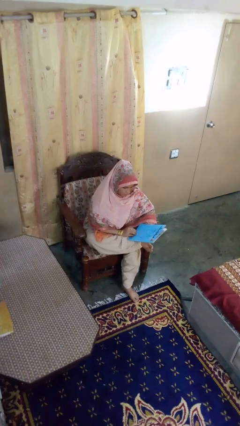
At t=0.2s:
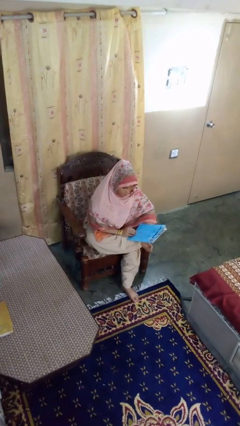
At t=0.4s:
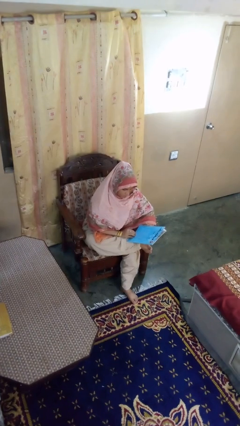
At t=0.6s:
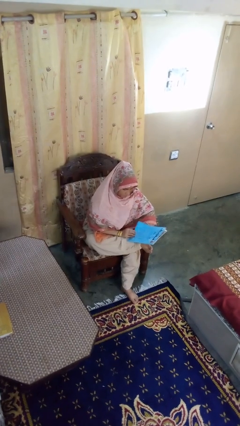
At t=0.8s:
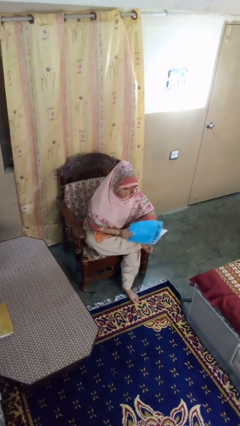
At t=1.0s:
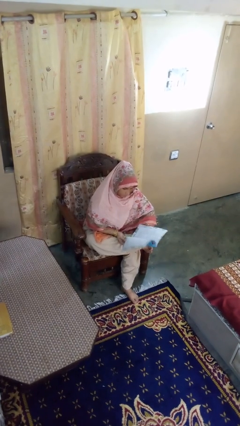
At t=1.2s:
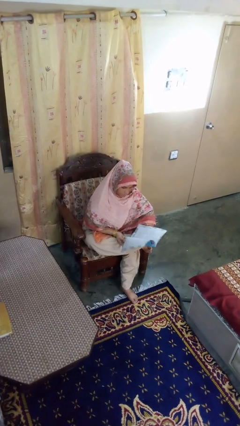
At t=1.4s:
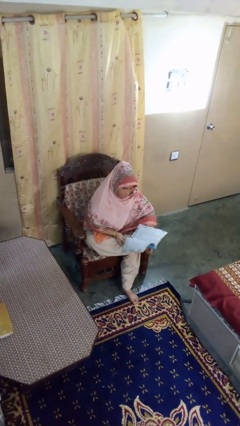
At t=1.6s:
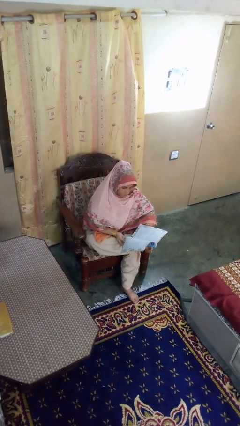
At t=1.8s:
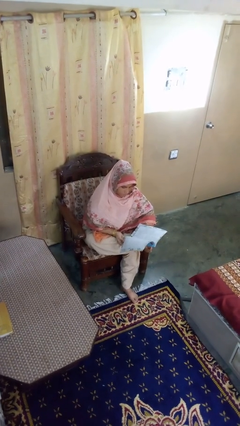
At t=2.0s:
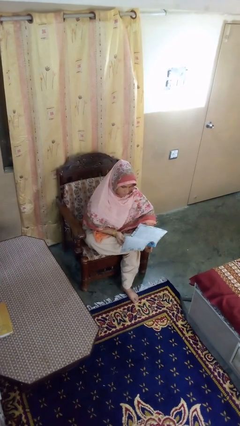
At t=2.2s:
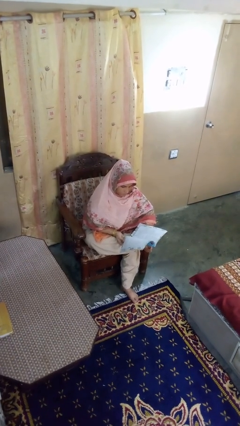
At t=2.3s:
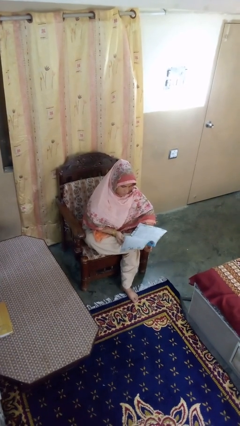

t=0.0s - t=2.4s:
person reads magazine

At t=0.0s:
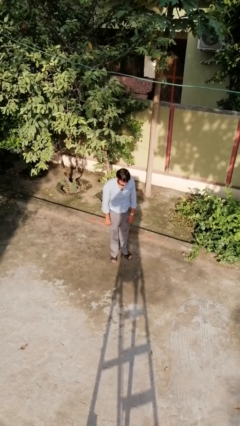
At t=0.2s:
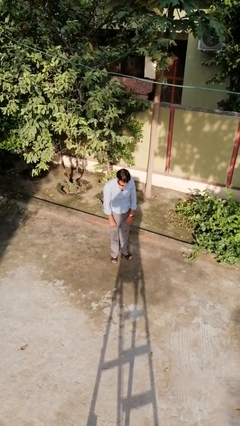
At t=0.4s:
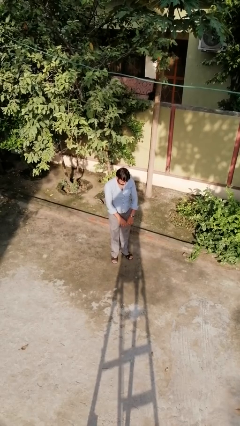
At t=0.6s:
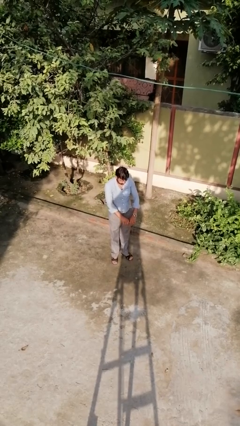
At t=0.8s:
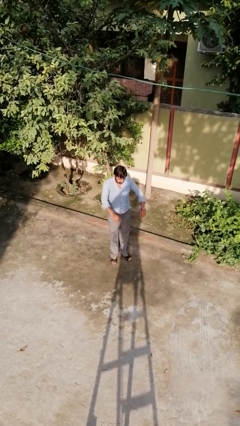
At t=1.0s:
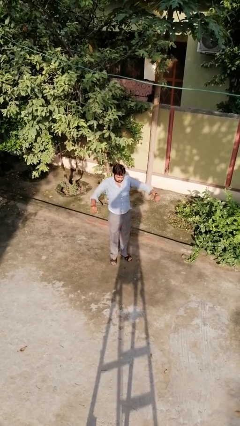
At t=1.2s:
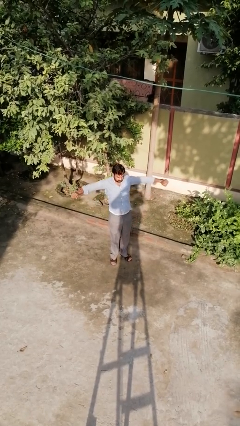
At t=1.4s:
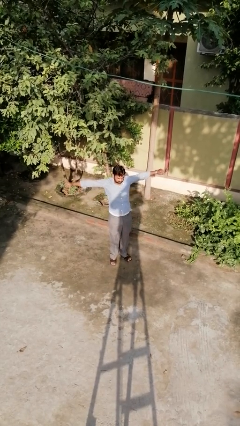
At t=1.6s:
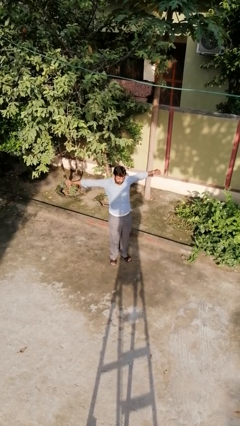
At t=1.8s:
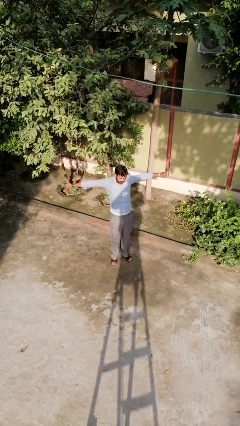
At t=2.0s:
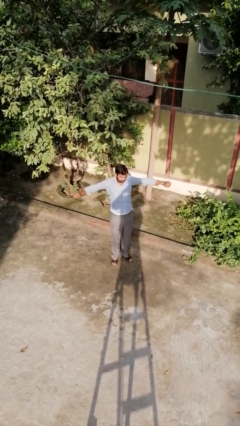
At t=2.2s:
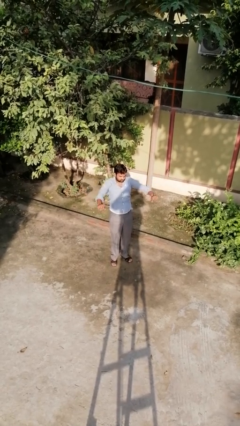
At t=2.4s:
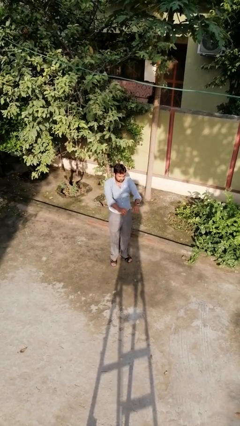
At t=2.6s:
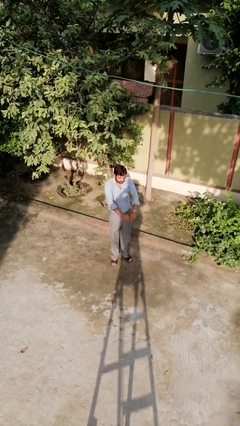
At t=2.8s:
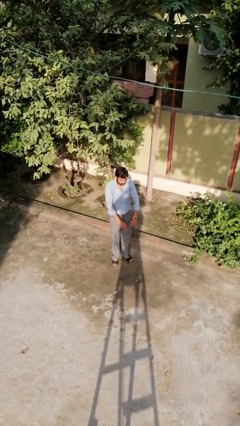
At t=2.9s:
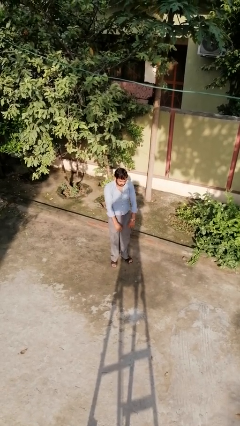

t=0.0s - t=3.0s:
person stretches arms to side

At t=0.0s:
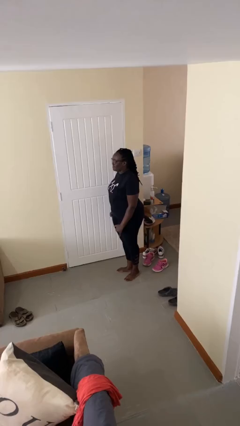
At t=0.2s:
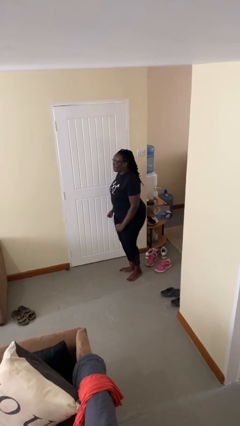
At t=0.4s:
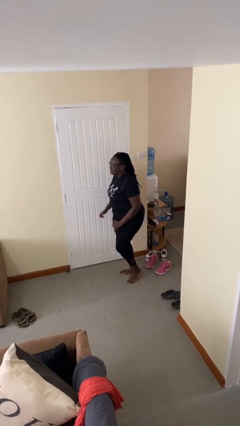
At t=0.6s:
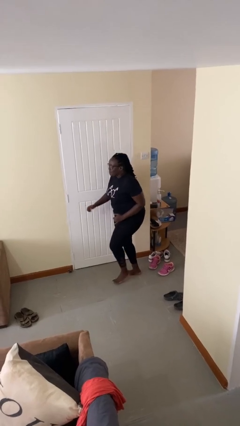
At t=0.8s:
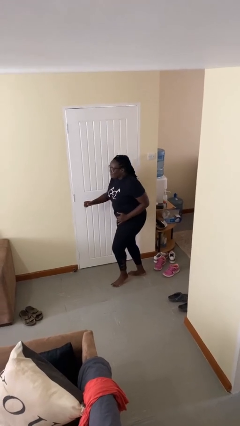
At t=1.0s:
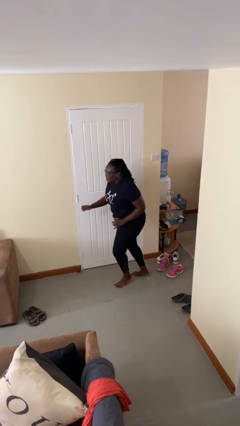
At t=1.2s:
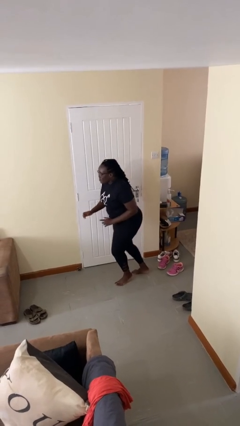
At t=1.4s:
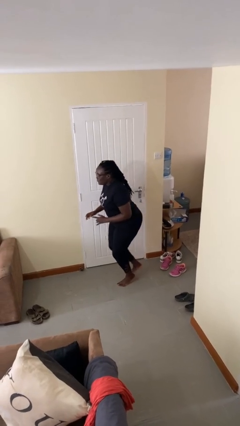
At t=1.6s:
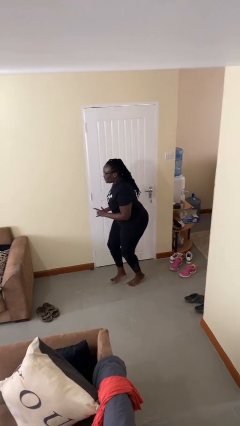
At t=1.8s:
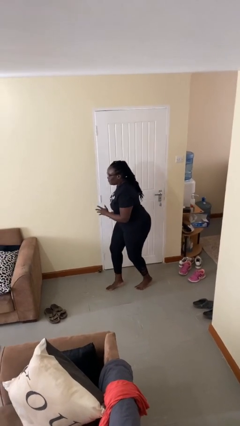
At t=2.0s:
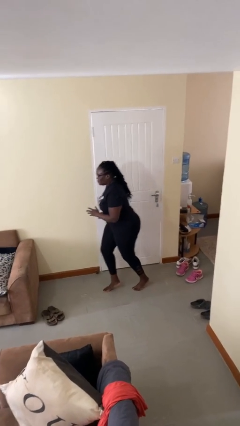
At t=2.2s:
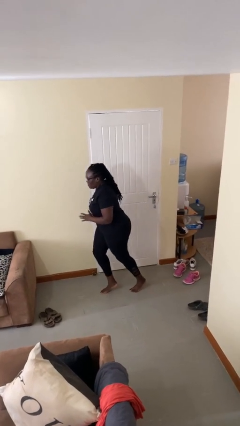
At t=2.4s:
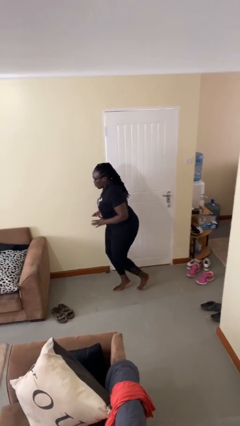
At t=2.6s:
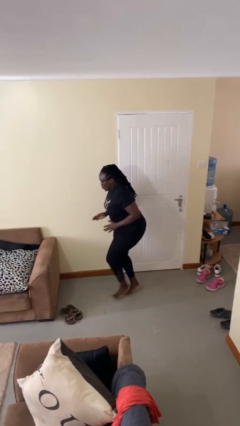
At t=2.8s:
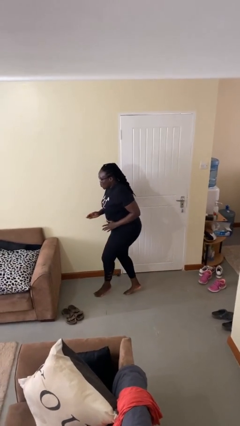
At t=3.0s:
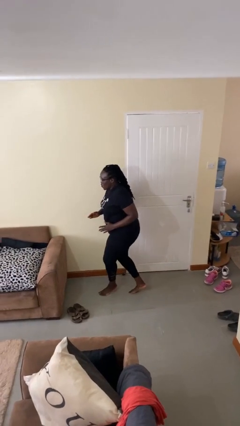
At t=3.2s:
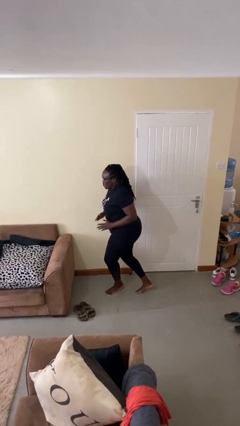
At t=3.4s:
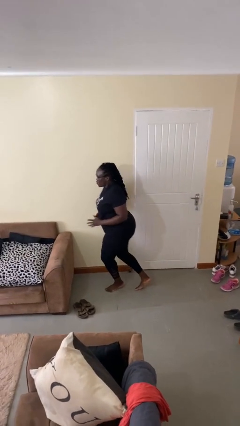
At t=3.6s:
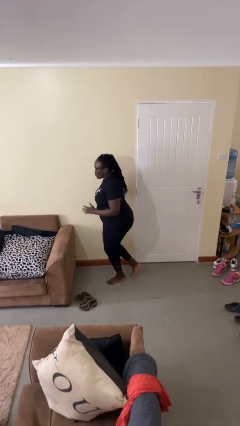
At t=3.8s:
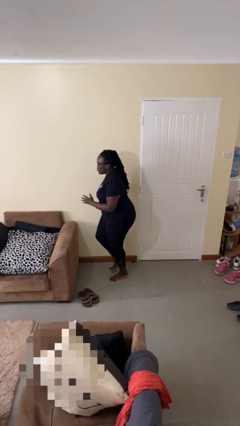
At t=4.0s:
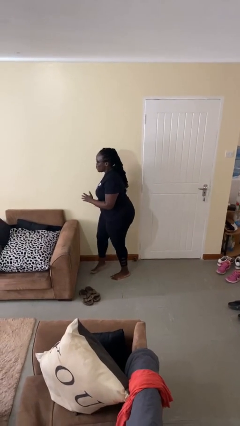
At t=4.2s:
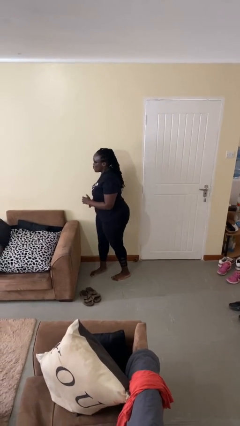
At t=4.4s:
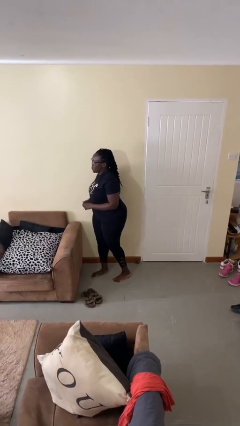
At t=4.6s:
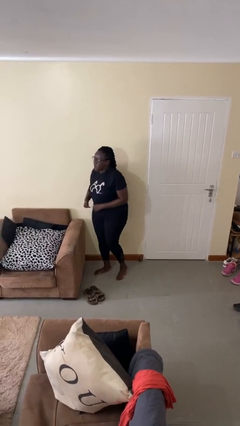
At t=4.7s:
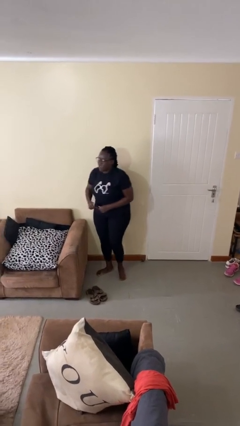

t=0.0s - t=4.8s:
person walks tiptoe

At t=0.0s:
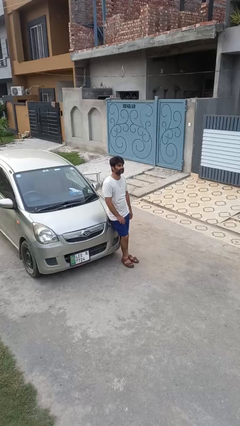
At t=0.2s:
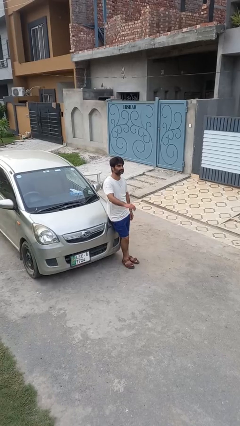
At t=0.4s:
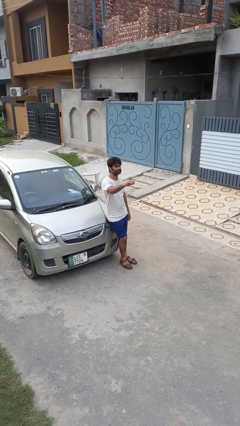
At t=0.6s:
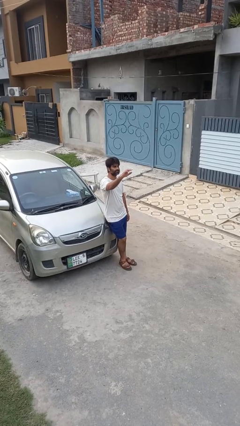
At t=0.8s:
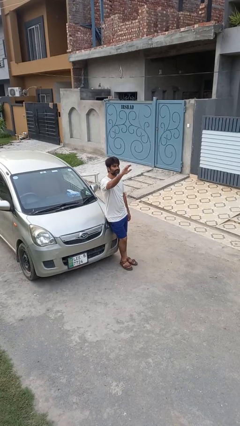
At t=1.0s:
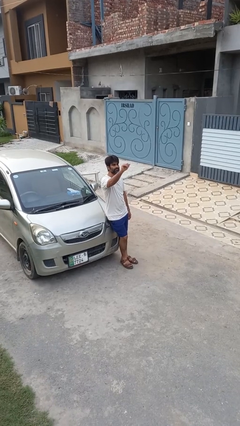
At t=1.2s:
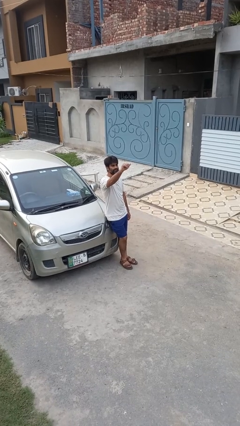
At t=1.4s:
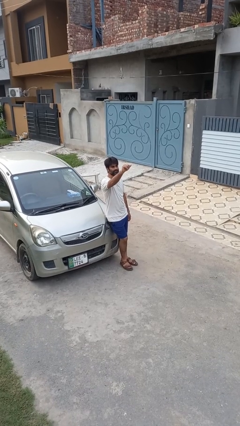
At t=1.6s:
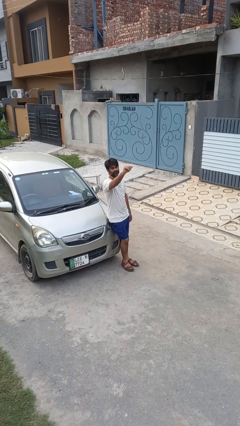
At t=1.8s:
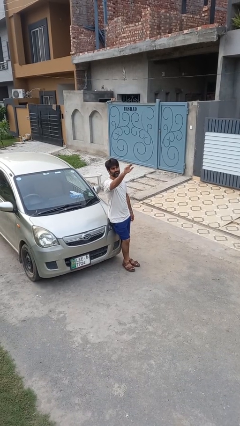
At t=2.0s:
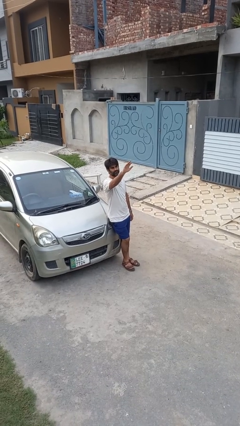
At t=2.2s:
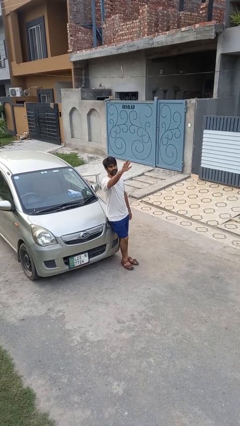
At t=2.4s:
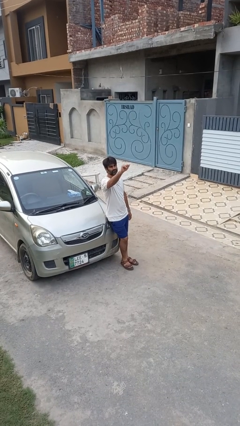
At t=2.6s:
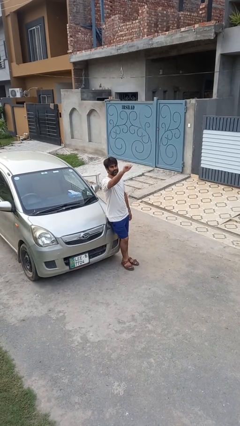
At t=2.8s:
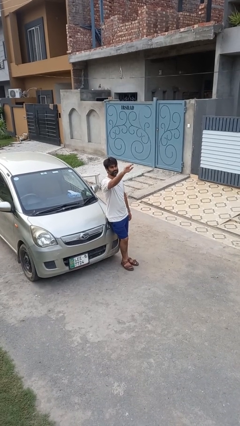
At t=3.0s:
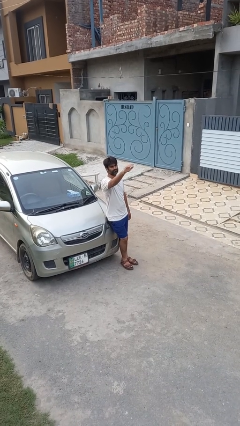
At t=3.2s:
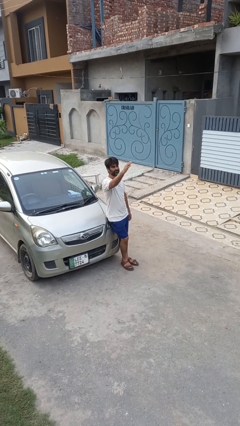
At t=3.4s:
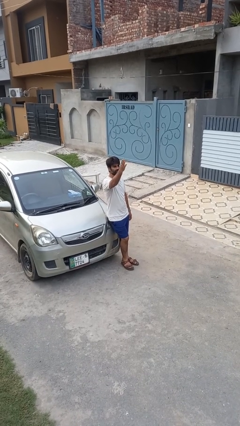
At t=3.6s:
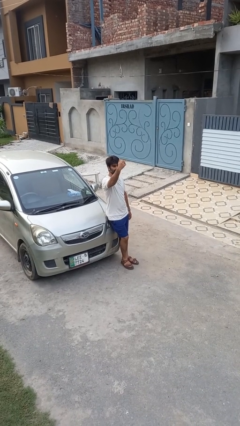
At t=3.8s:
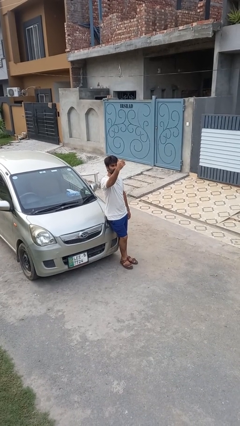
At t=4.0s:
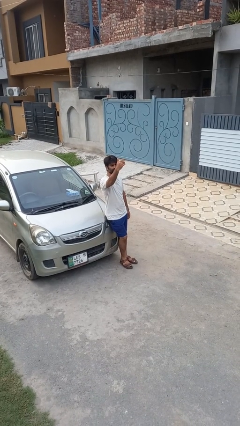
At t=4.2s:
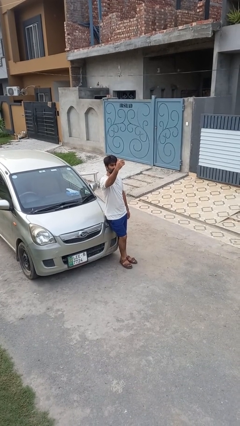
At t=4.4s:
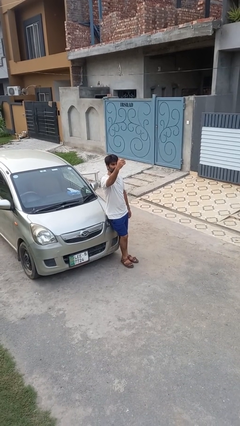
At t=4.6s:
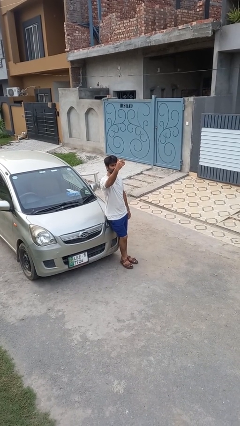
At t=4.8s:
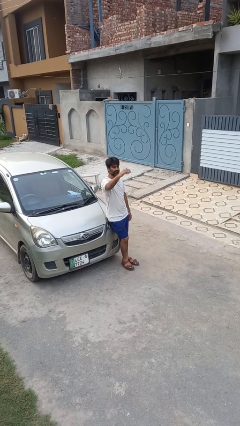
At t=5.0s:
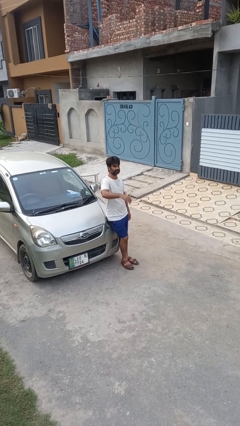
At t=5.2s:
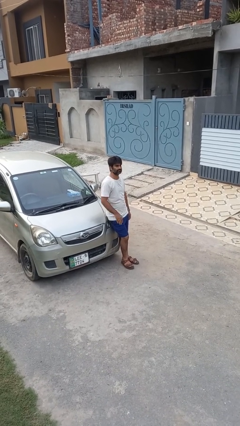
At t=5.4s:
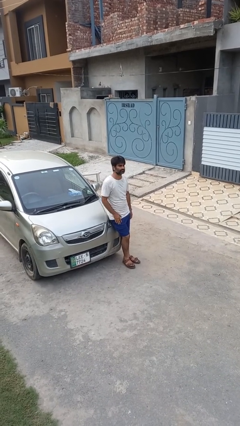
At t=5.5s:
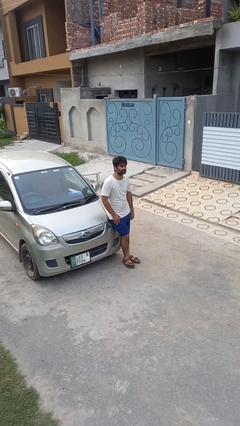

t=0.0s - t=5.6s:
person gestures come here

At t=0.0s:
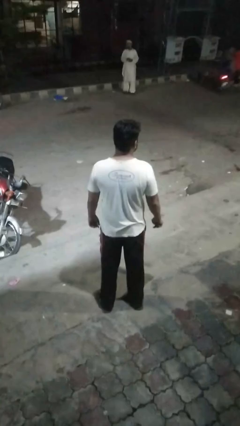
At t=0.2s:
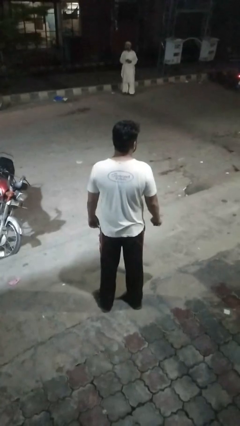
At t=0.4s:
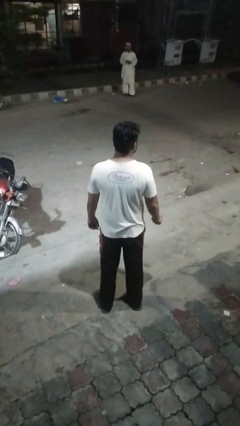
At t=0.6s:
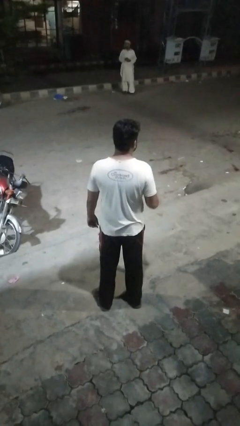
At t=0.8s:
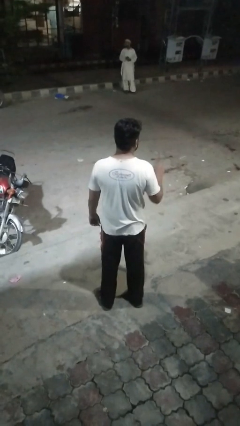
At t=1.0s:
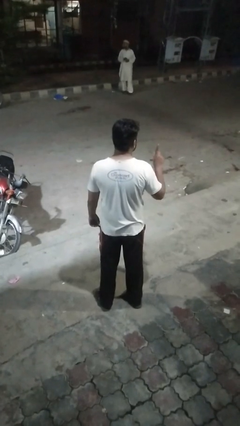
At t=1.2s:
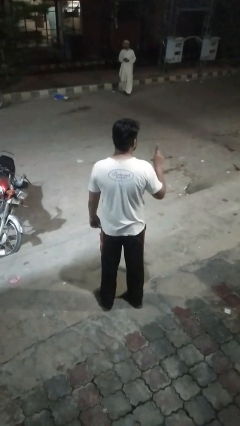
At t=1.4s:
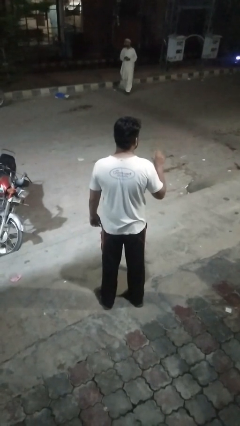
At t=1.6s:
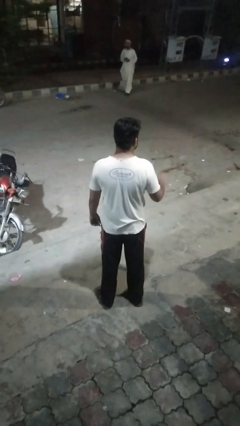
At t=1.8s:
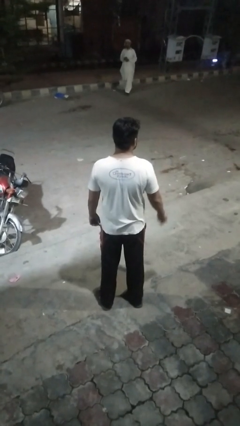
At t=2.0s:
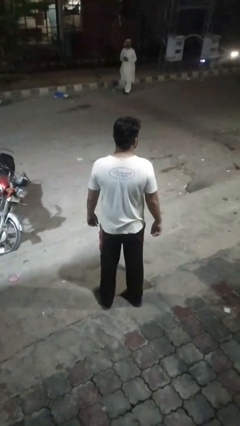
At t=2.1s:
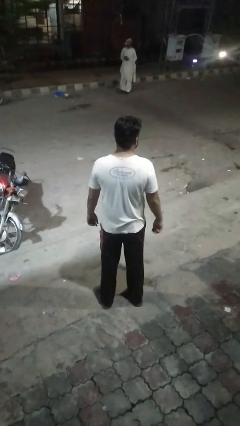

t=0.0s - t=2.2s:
person gestures number one
